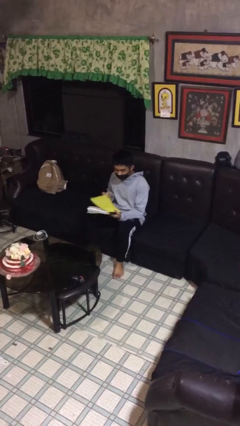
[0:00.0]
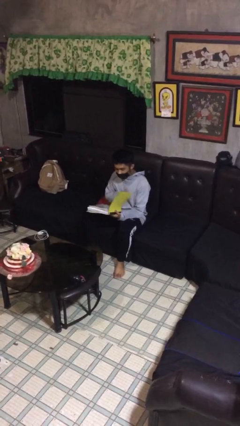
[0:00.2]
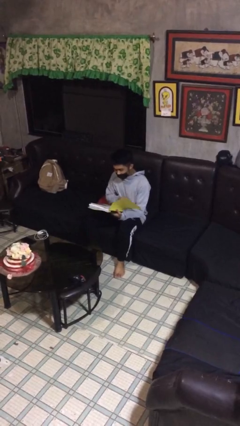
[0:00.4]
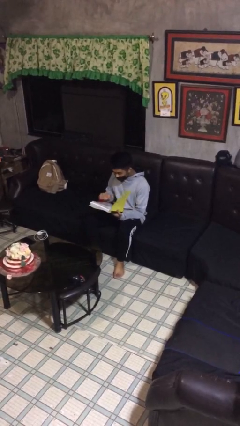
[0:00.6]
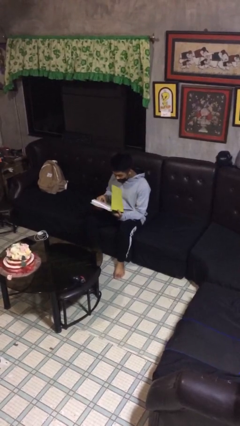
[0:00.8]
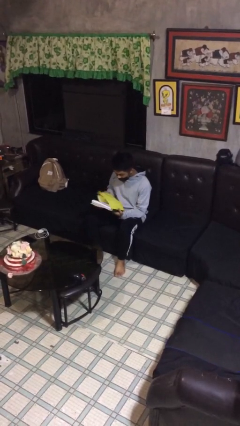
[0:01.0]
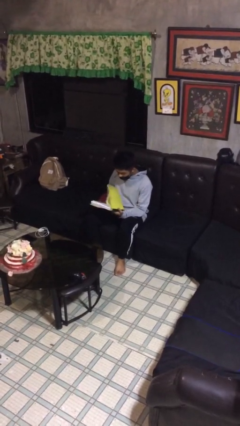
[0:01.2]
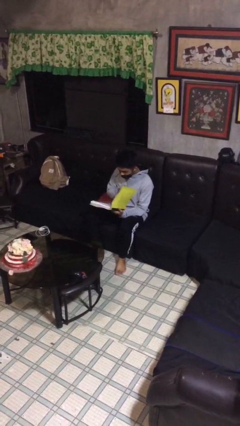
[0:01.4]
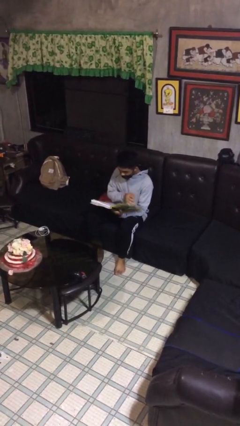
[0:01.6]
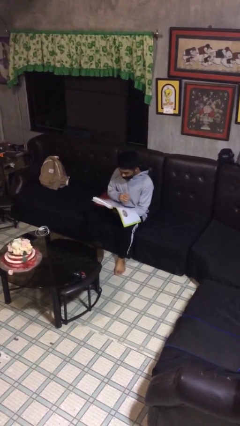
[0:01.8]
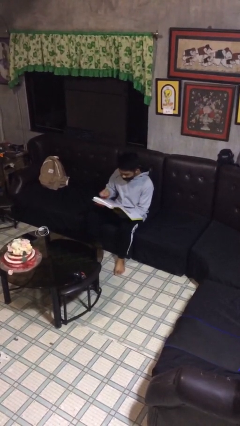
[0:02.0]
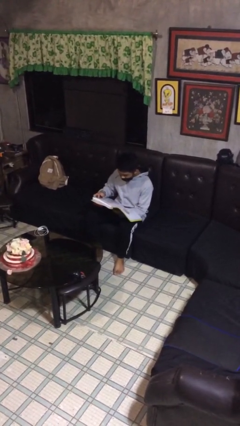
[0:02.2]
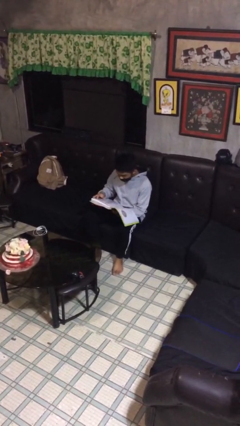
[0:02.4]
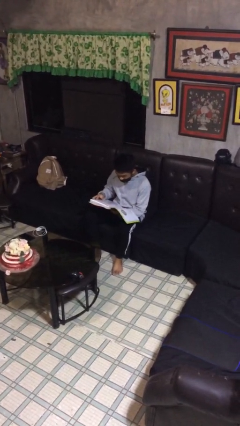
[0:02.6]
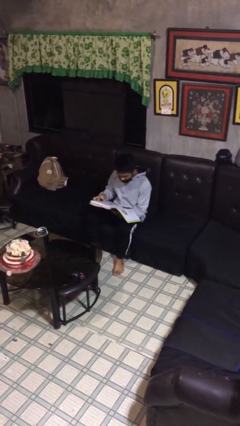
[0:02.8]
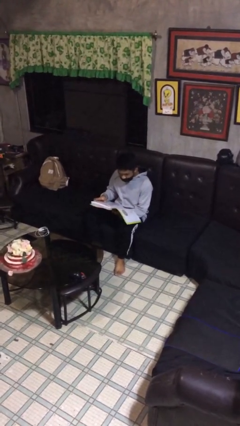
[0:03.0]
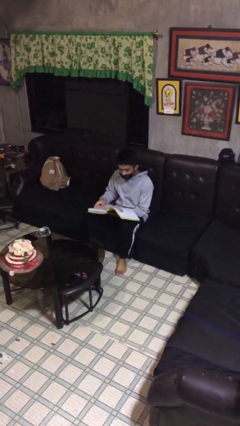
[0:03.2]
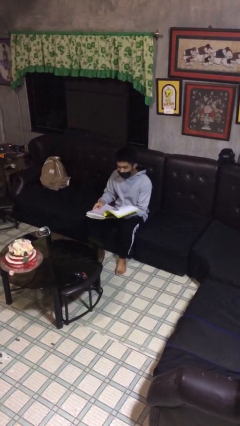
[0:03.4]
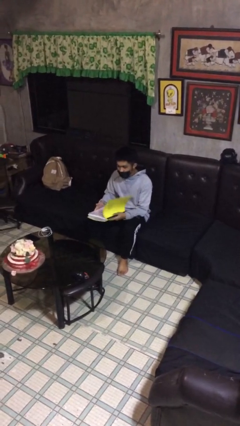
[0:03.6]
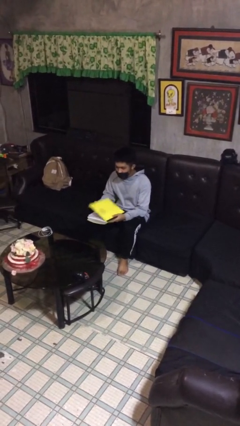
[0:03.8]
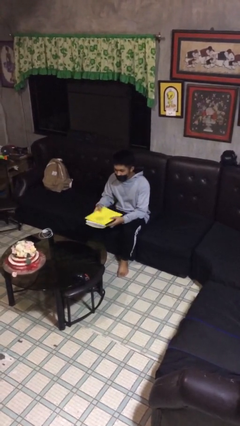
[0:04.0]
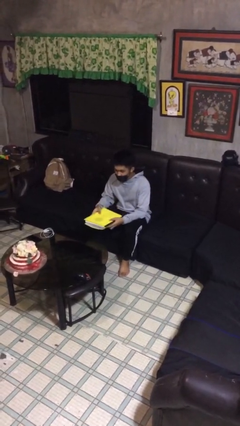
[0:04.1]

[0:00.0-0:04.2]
person reads document

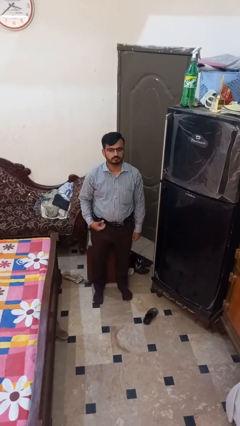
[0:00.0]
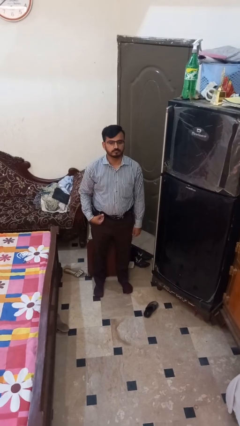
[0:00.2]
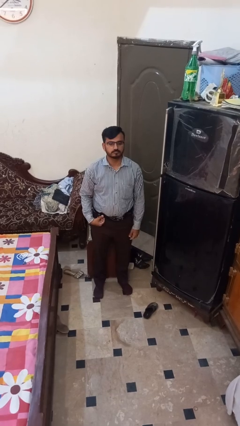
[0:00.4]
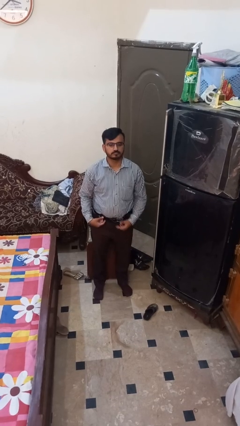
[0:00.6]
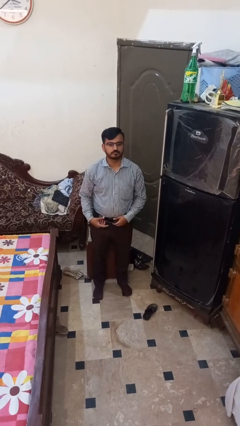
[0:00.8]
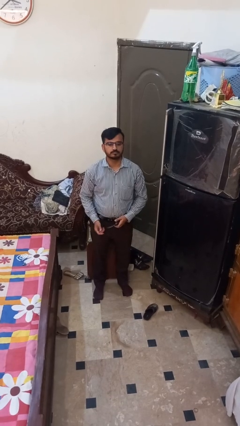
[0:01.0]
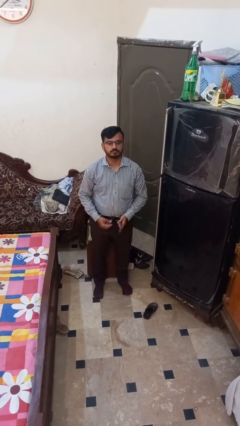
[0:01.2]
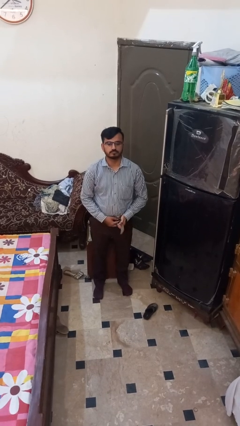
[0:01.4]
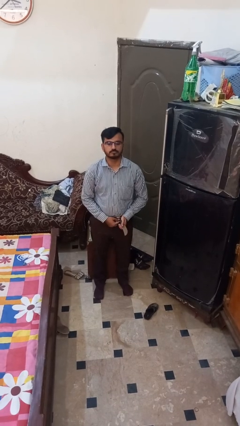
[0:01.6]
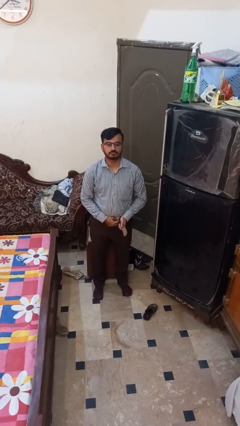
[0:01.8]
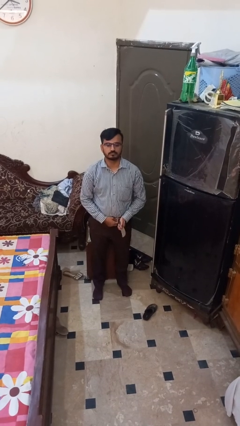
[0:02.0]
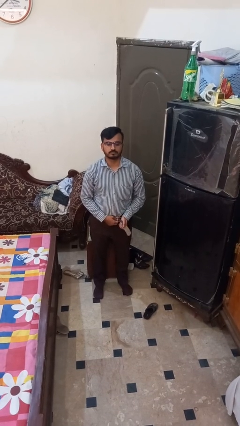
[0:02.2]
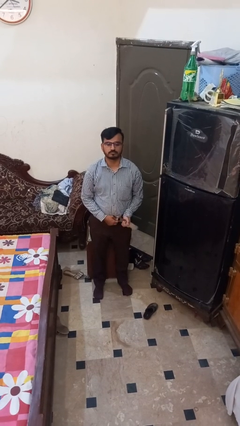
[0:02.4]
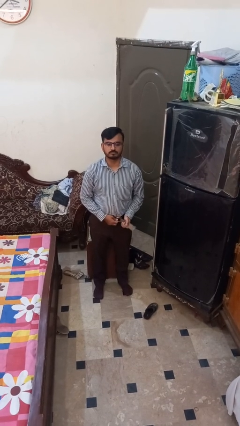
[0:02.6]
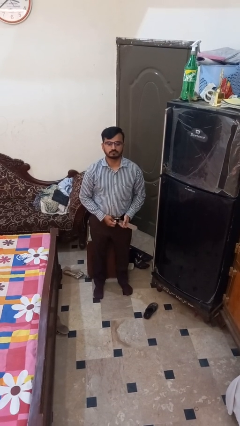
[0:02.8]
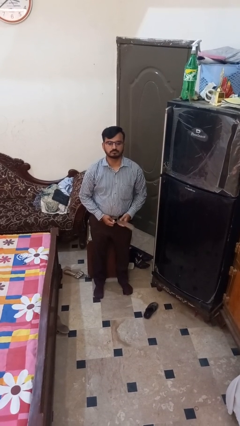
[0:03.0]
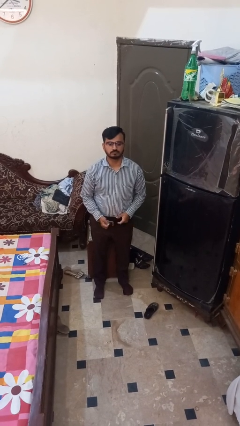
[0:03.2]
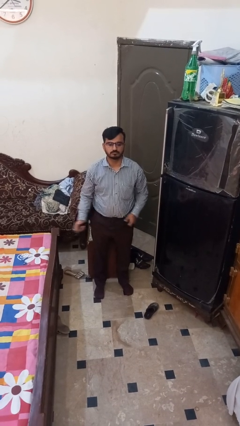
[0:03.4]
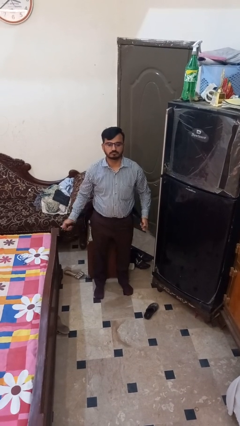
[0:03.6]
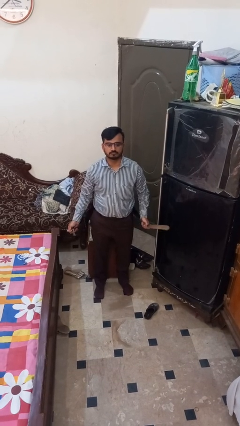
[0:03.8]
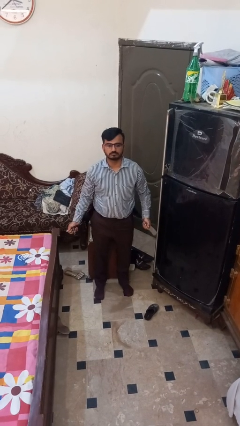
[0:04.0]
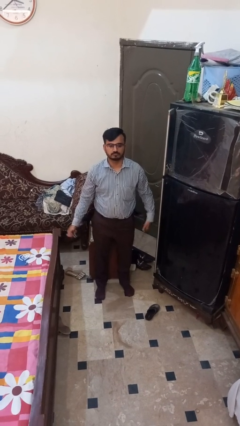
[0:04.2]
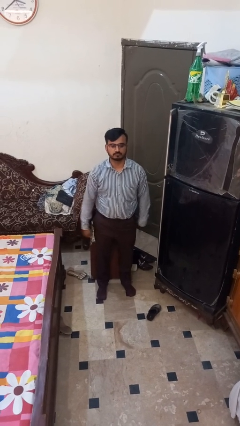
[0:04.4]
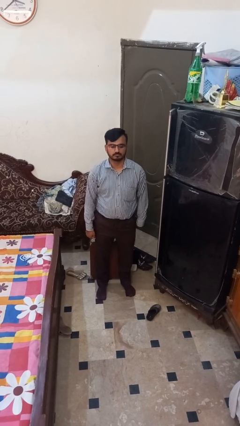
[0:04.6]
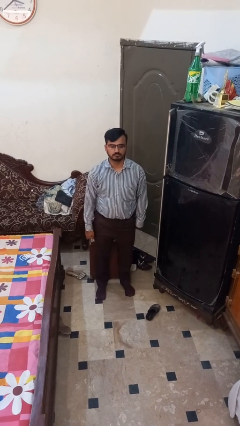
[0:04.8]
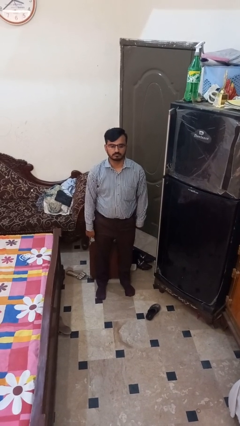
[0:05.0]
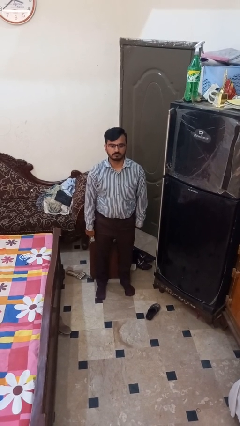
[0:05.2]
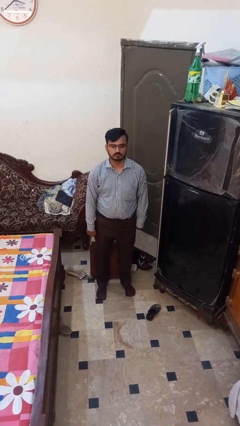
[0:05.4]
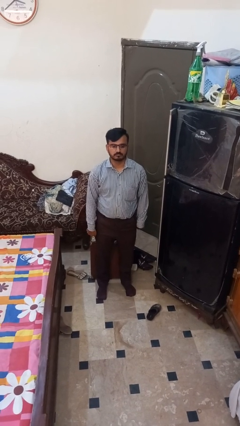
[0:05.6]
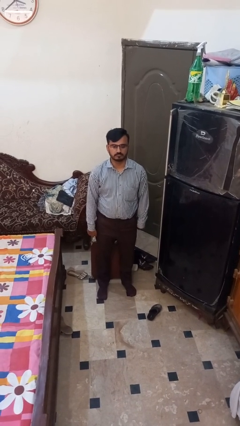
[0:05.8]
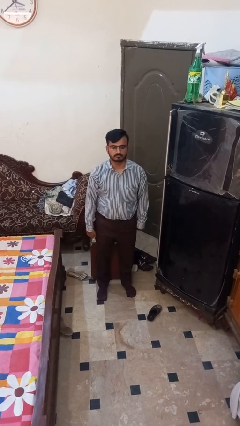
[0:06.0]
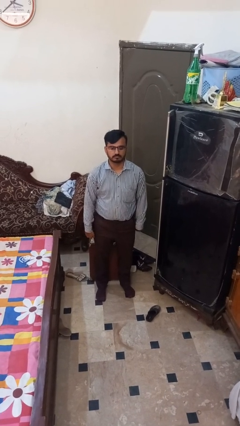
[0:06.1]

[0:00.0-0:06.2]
person takes off belt

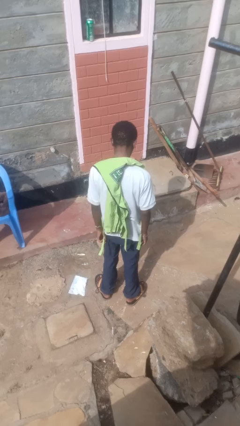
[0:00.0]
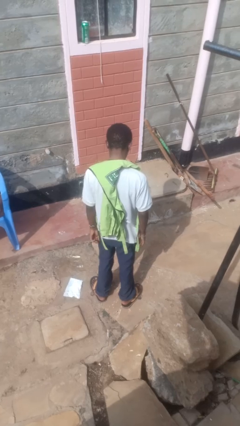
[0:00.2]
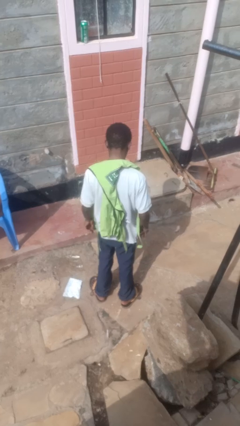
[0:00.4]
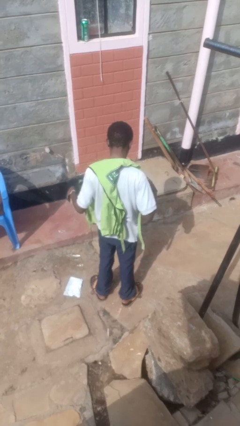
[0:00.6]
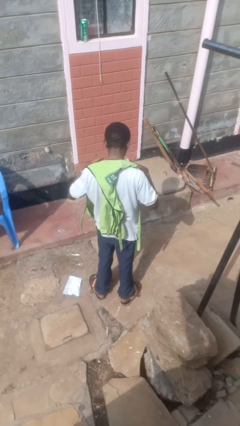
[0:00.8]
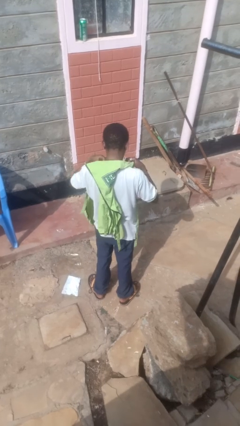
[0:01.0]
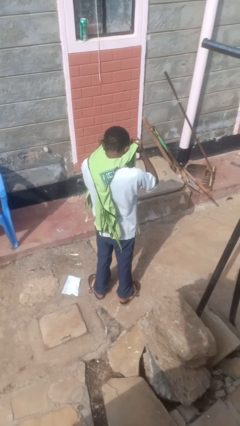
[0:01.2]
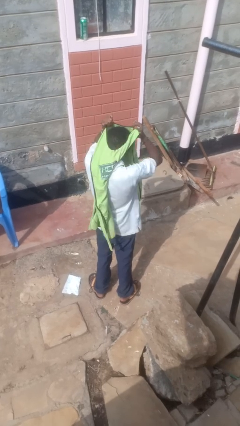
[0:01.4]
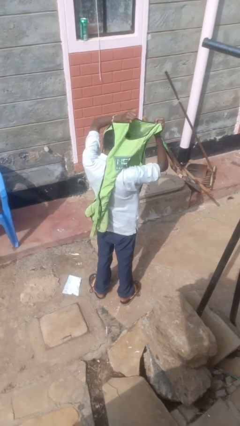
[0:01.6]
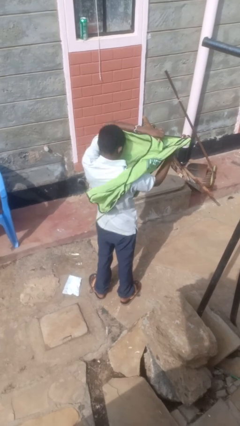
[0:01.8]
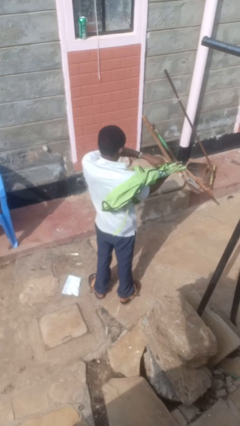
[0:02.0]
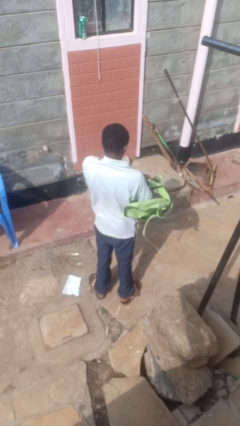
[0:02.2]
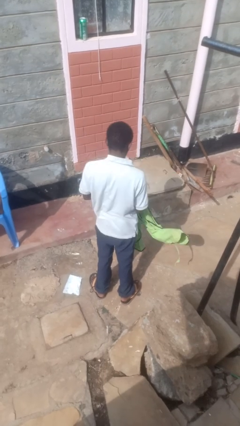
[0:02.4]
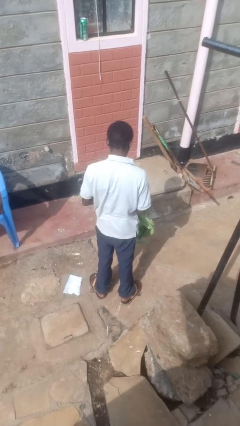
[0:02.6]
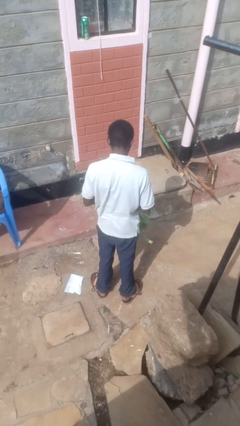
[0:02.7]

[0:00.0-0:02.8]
person takes off apron

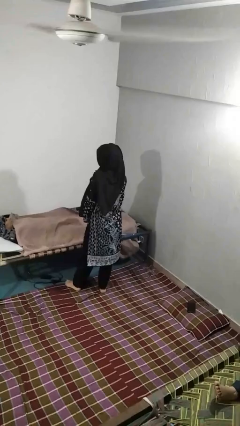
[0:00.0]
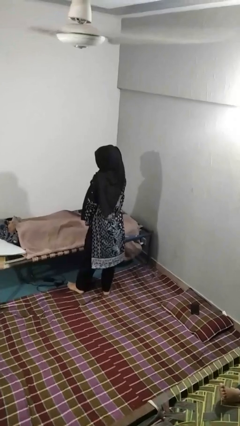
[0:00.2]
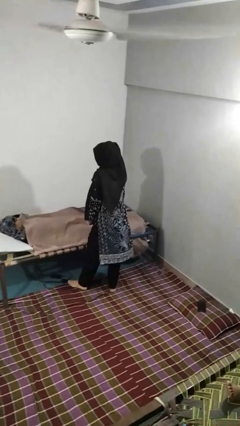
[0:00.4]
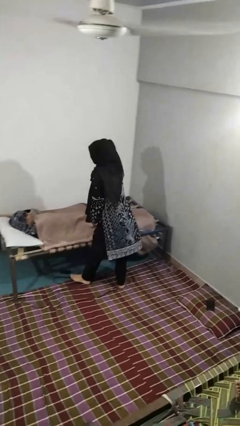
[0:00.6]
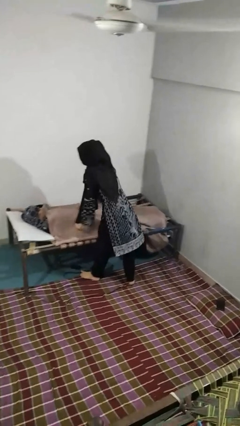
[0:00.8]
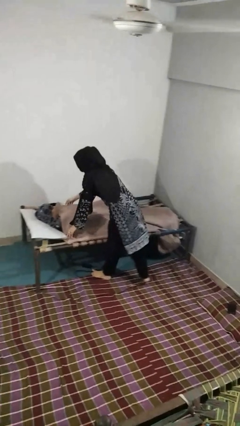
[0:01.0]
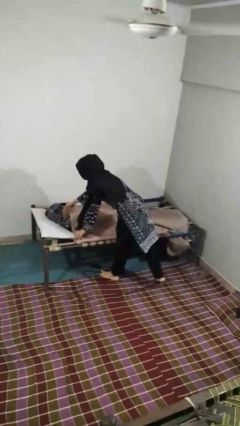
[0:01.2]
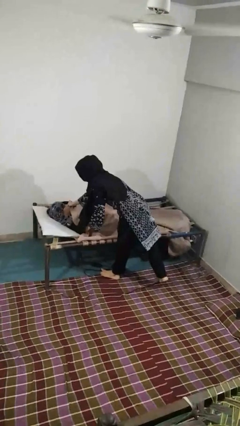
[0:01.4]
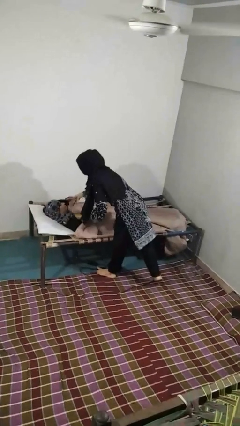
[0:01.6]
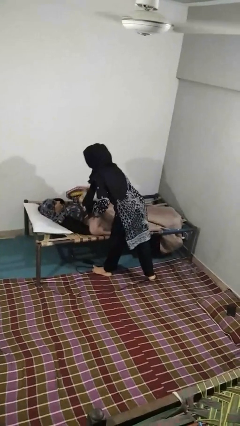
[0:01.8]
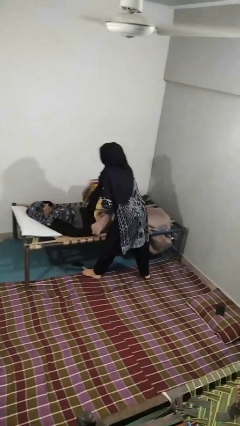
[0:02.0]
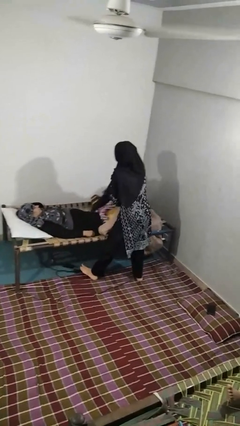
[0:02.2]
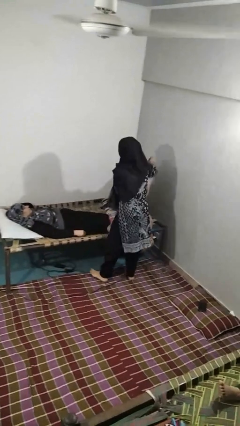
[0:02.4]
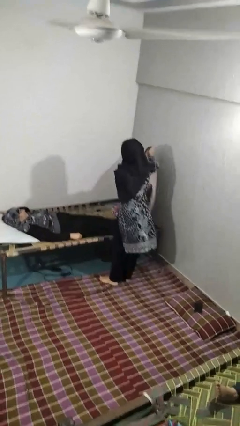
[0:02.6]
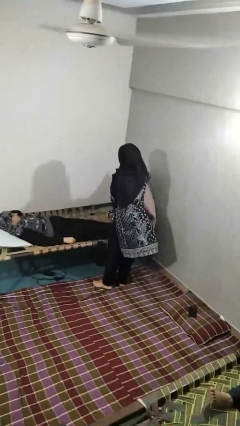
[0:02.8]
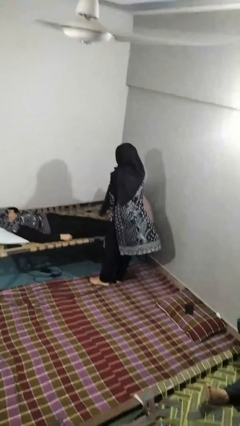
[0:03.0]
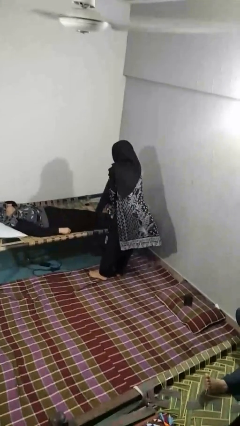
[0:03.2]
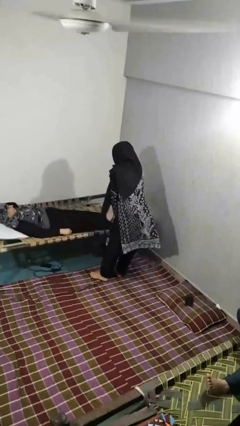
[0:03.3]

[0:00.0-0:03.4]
person uncovers friend with blanket

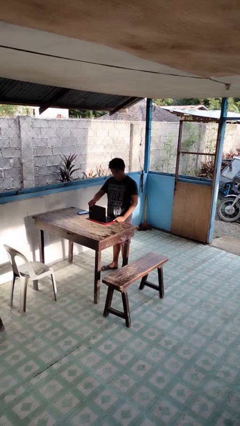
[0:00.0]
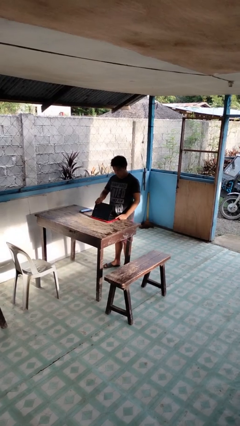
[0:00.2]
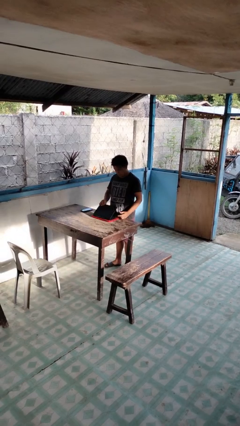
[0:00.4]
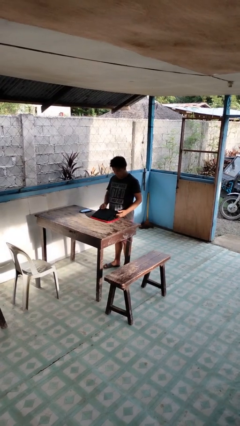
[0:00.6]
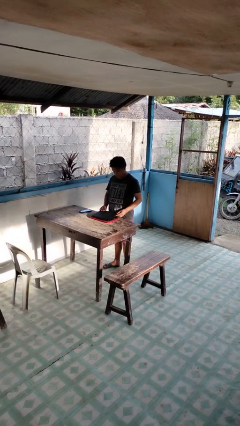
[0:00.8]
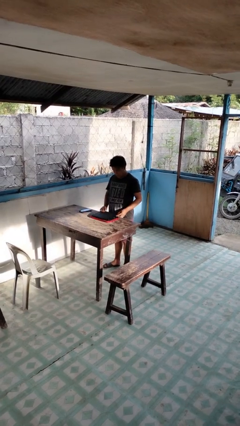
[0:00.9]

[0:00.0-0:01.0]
person closes laptop

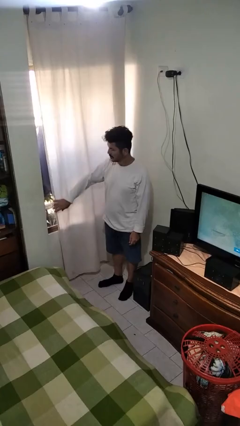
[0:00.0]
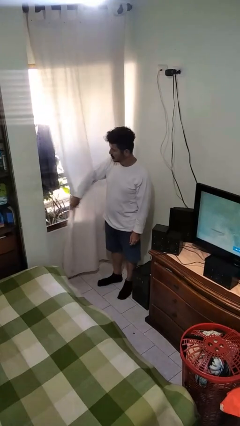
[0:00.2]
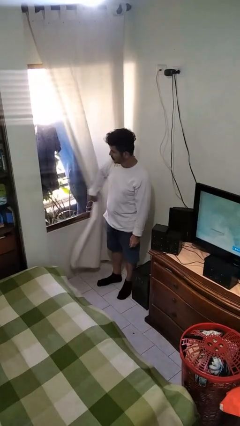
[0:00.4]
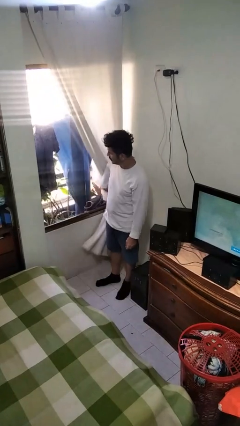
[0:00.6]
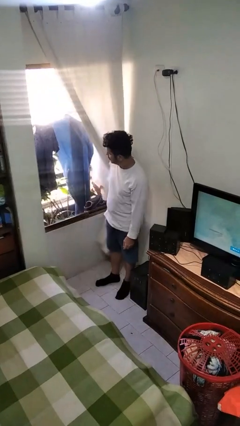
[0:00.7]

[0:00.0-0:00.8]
person opens curtains
